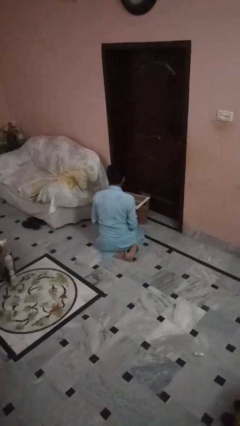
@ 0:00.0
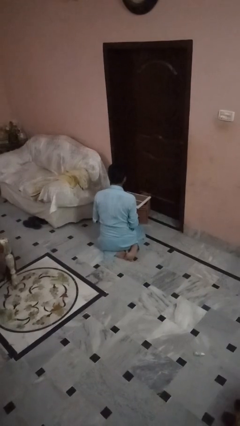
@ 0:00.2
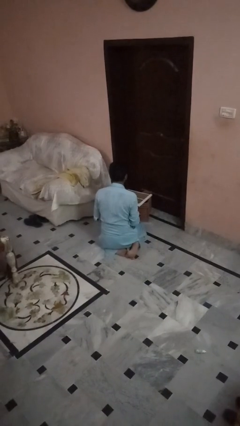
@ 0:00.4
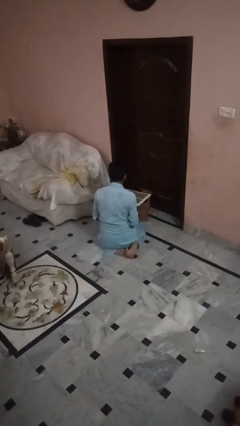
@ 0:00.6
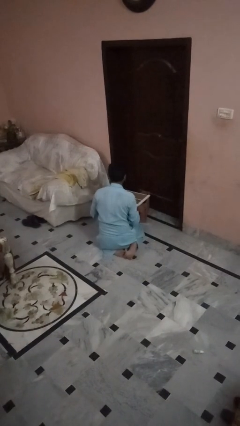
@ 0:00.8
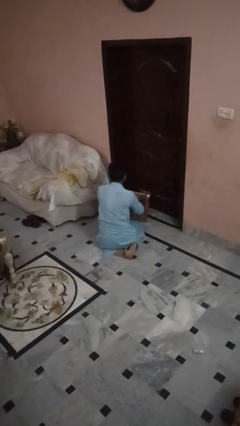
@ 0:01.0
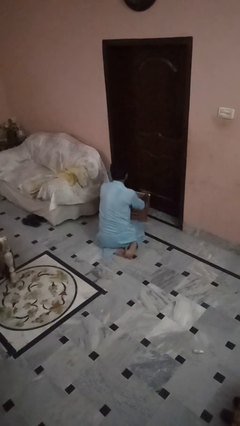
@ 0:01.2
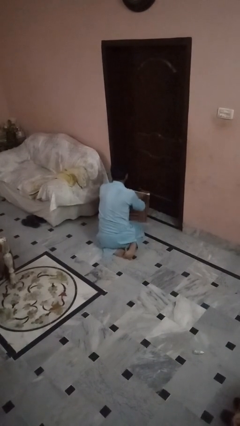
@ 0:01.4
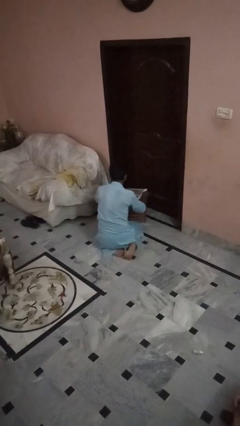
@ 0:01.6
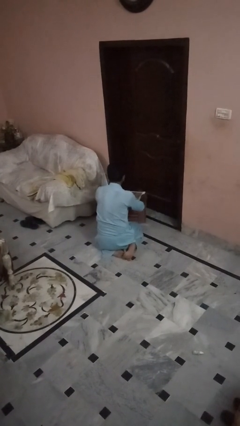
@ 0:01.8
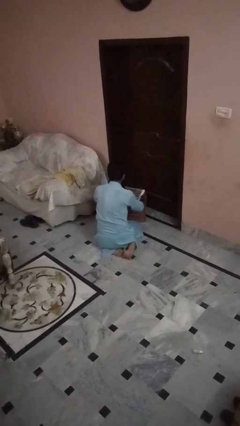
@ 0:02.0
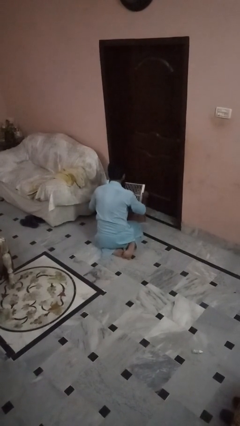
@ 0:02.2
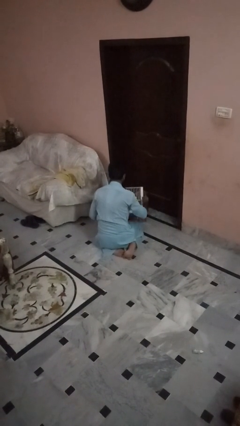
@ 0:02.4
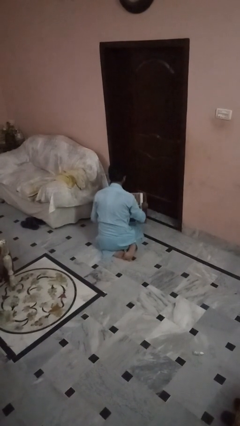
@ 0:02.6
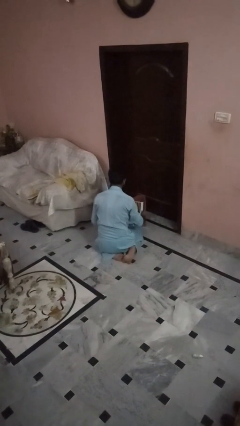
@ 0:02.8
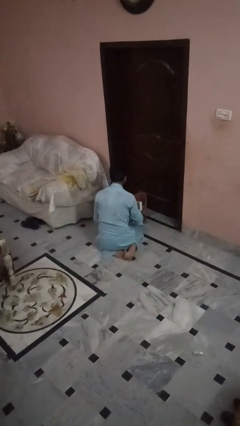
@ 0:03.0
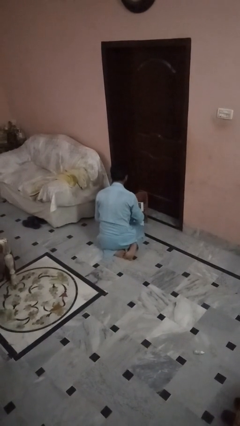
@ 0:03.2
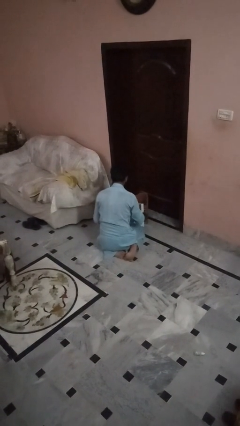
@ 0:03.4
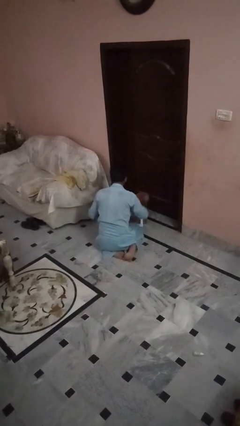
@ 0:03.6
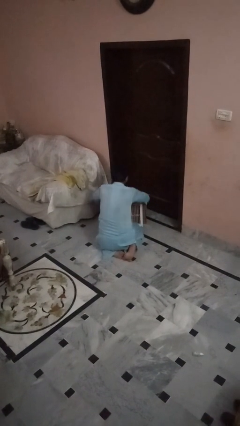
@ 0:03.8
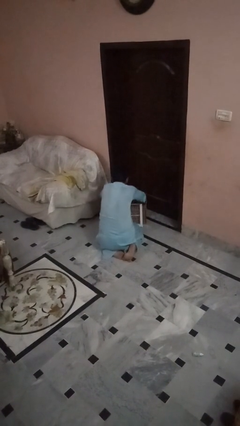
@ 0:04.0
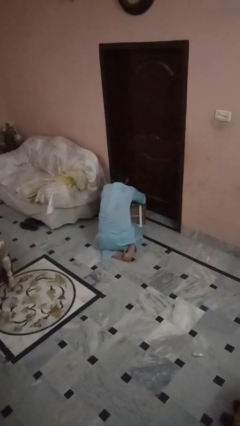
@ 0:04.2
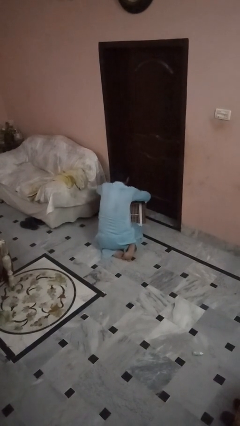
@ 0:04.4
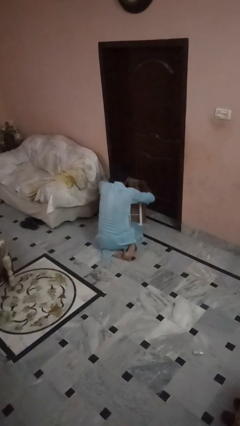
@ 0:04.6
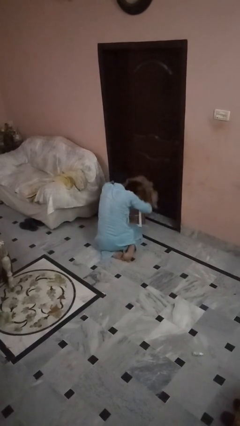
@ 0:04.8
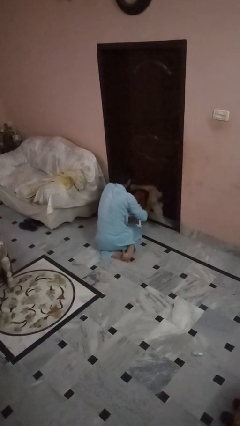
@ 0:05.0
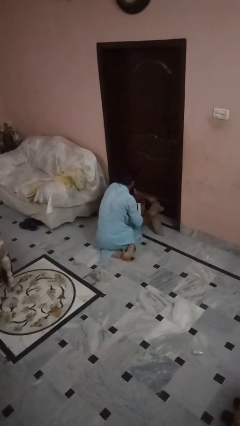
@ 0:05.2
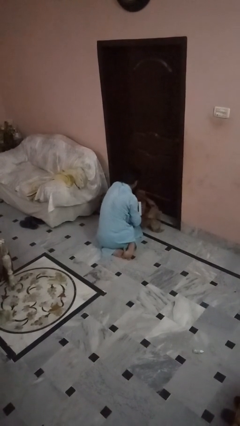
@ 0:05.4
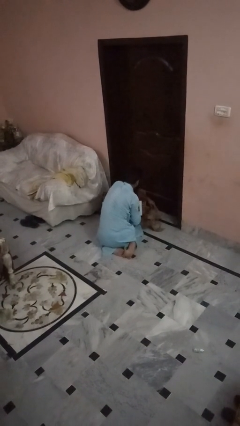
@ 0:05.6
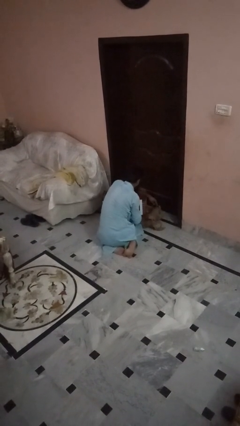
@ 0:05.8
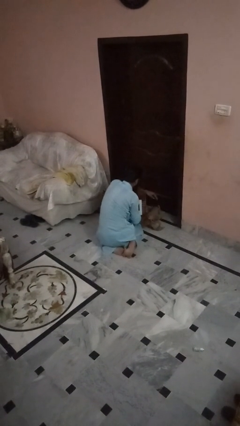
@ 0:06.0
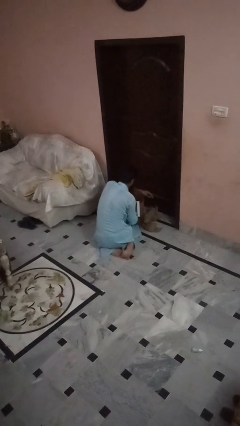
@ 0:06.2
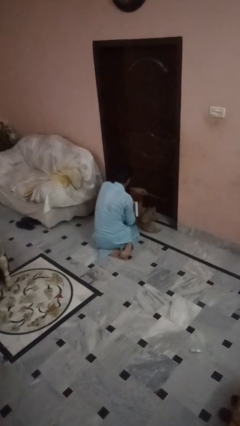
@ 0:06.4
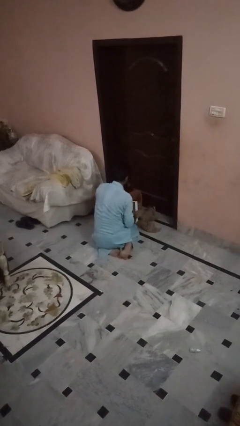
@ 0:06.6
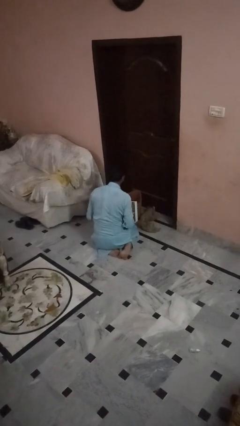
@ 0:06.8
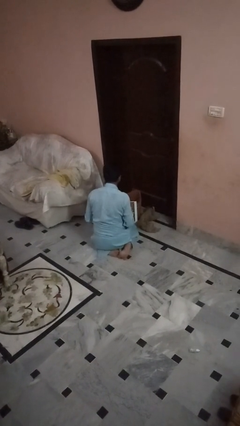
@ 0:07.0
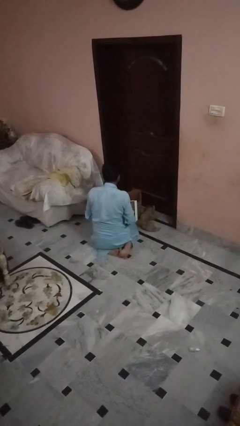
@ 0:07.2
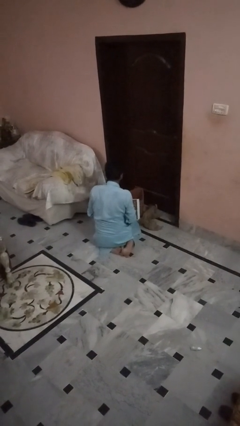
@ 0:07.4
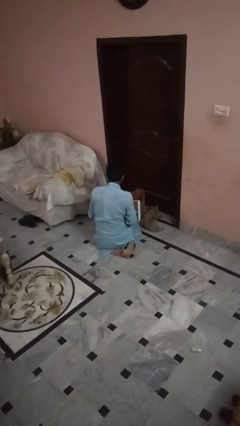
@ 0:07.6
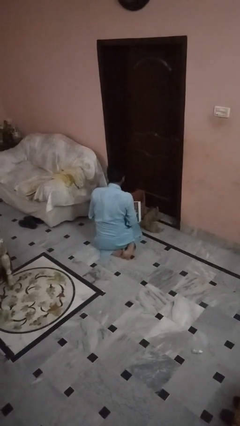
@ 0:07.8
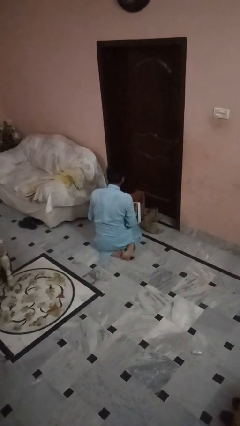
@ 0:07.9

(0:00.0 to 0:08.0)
person uncrates dog

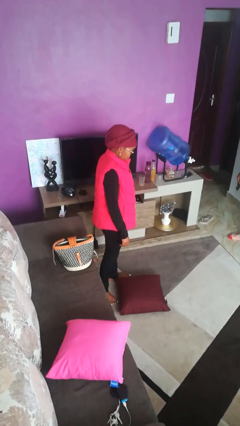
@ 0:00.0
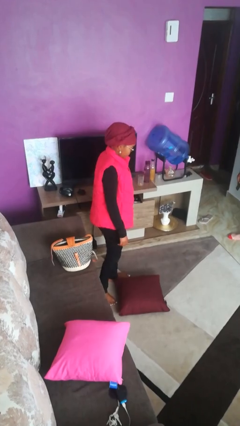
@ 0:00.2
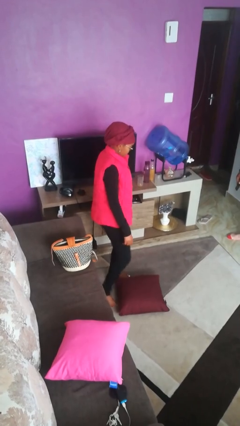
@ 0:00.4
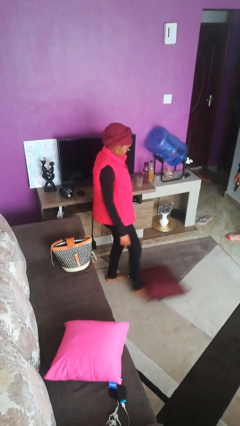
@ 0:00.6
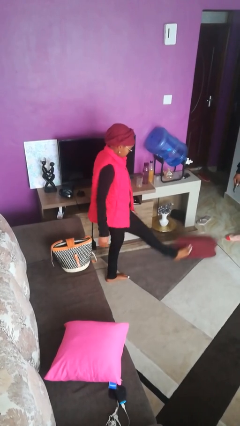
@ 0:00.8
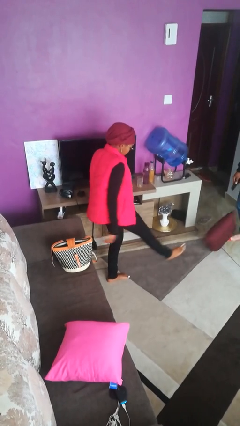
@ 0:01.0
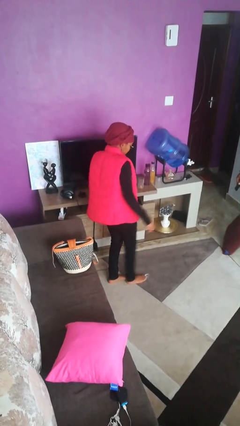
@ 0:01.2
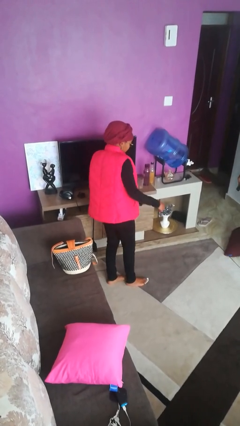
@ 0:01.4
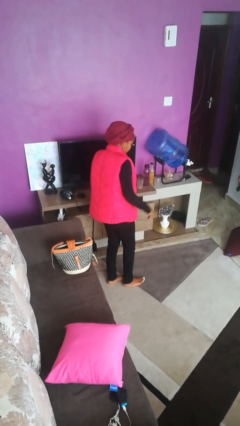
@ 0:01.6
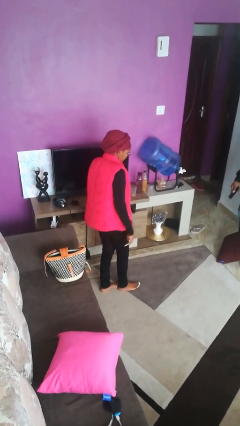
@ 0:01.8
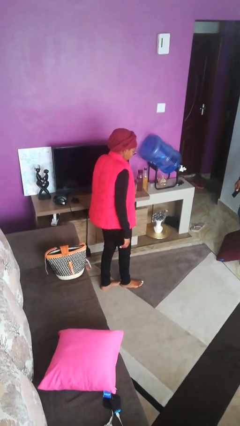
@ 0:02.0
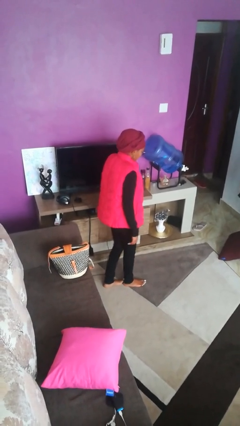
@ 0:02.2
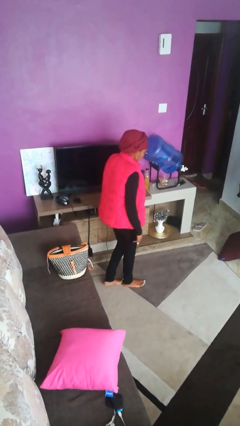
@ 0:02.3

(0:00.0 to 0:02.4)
person kicks object to person

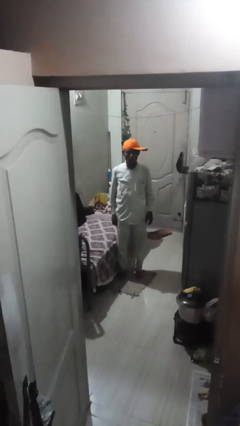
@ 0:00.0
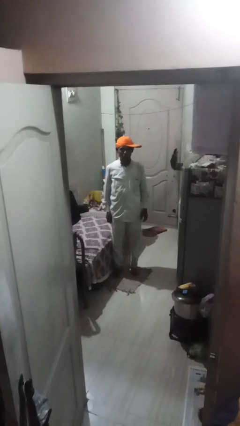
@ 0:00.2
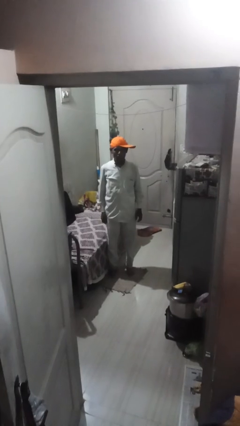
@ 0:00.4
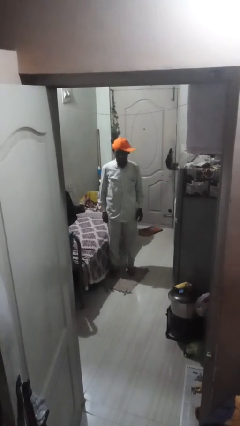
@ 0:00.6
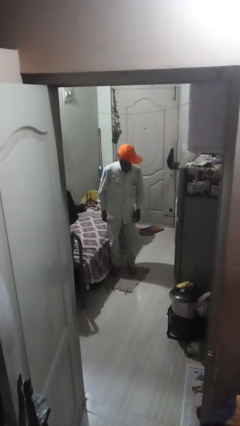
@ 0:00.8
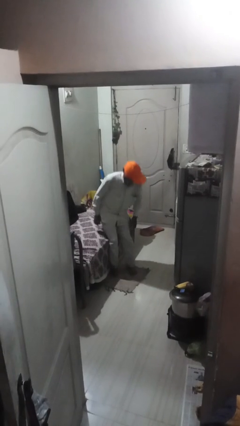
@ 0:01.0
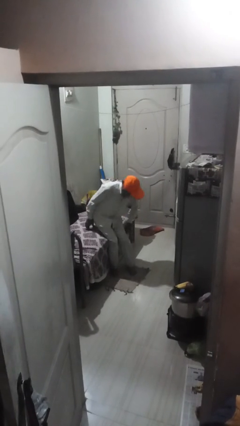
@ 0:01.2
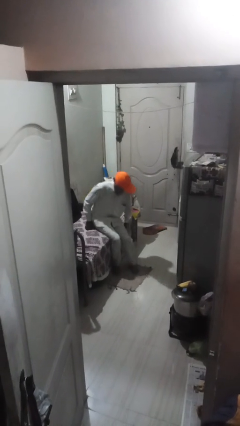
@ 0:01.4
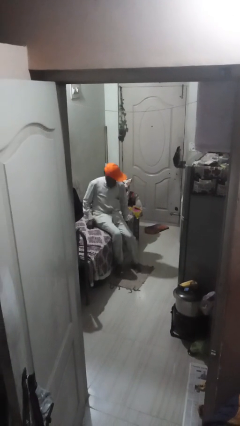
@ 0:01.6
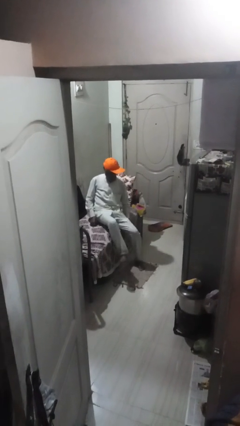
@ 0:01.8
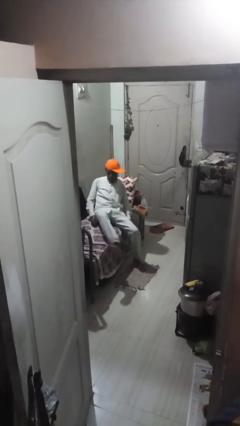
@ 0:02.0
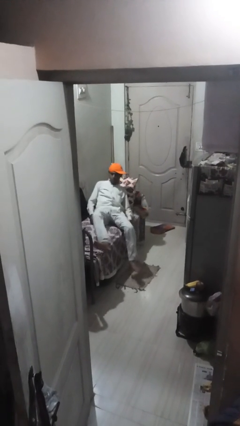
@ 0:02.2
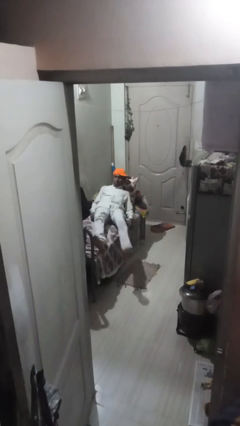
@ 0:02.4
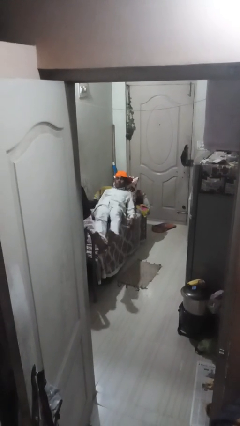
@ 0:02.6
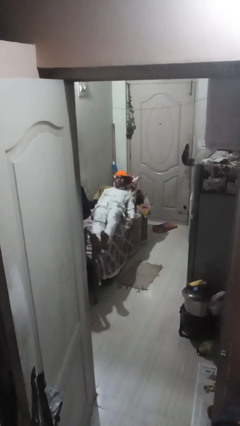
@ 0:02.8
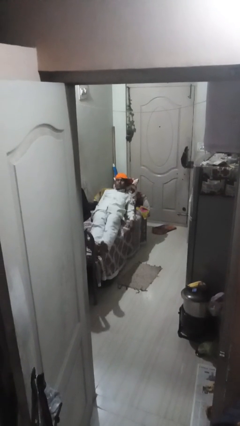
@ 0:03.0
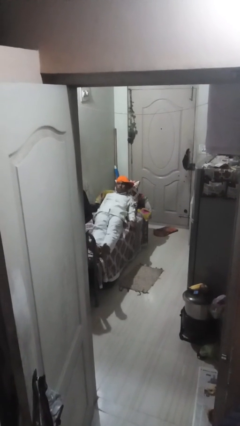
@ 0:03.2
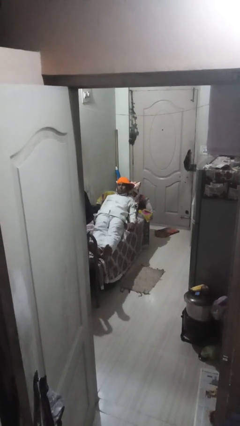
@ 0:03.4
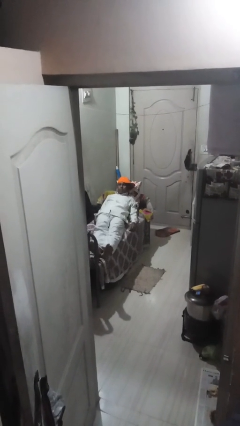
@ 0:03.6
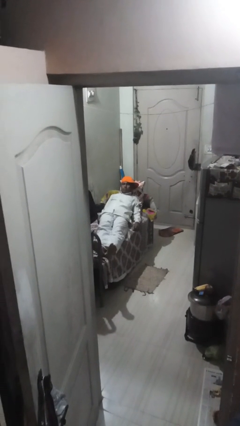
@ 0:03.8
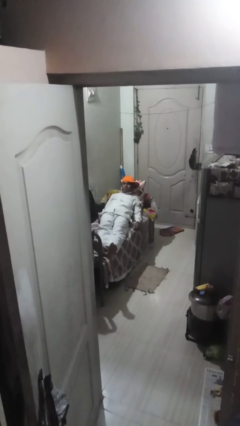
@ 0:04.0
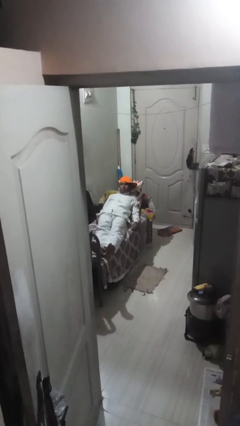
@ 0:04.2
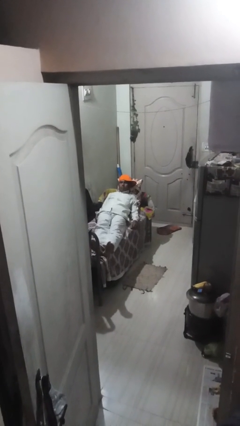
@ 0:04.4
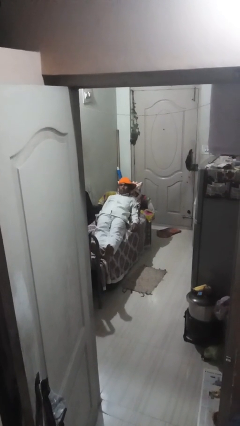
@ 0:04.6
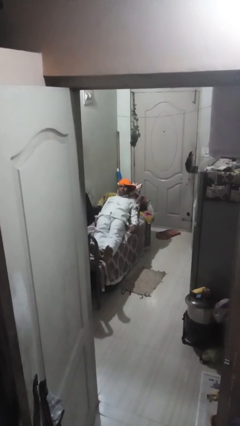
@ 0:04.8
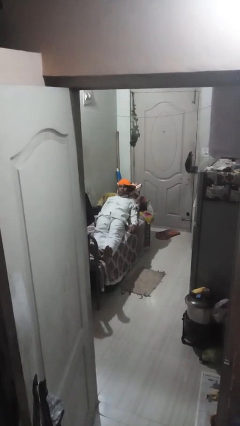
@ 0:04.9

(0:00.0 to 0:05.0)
person lies down on bed

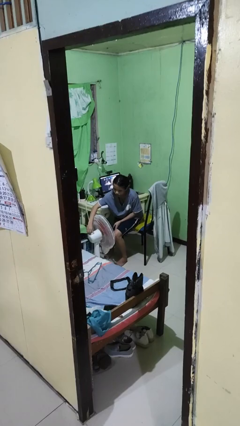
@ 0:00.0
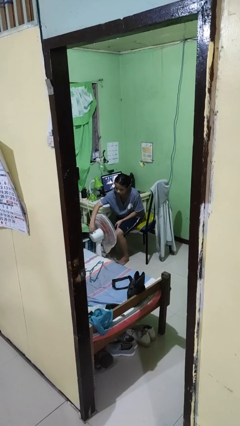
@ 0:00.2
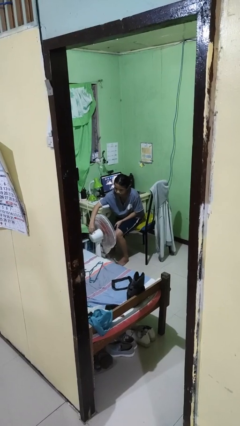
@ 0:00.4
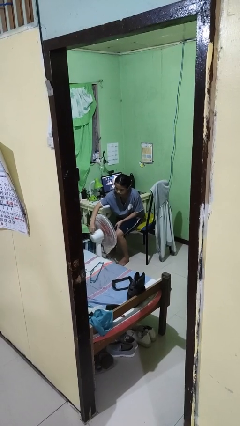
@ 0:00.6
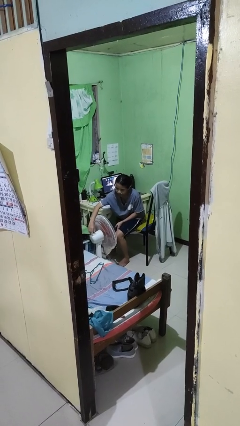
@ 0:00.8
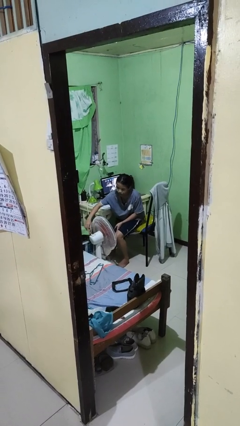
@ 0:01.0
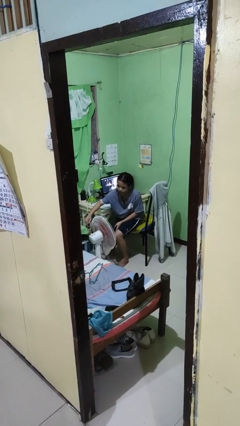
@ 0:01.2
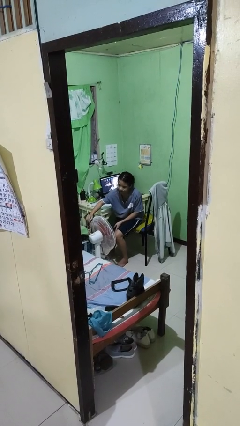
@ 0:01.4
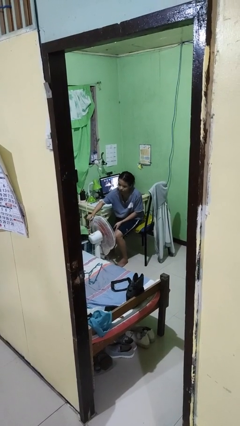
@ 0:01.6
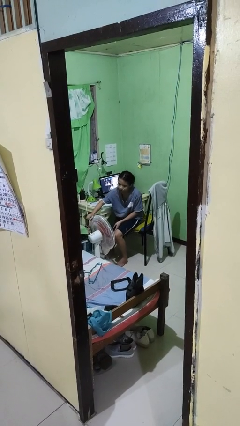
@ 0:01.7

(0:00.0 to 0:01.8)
person turns off fan

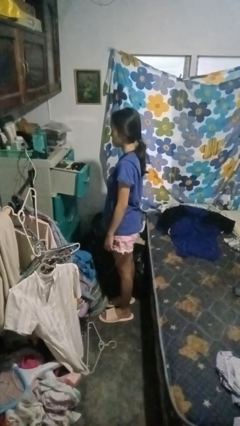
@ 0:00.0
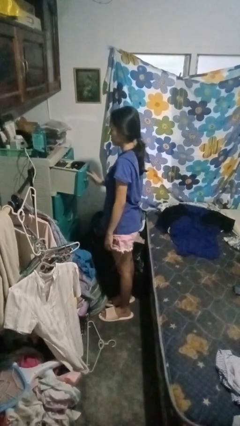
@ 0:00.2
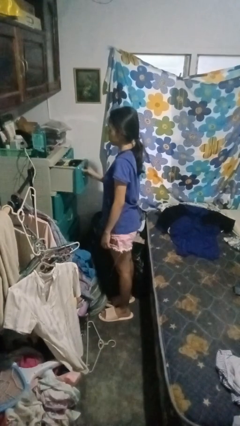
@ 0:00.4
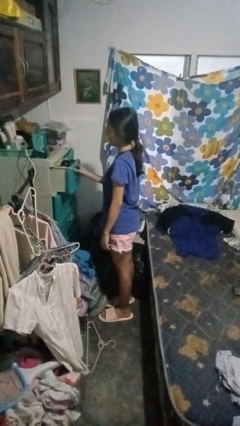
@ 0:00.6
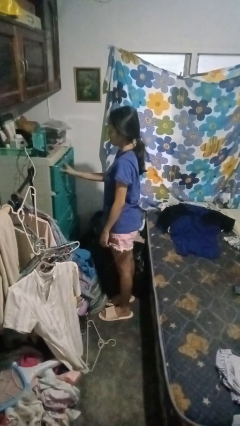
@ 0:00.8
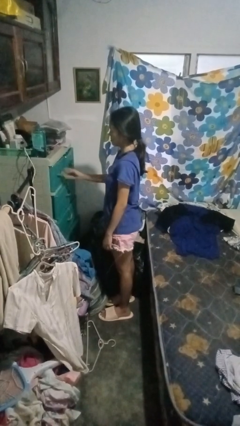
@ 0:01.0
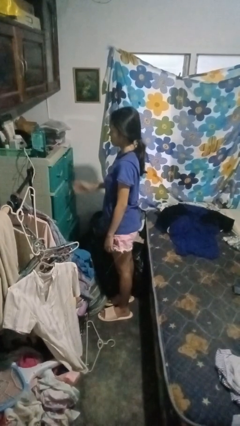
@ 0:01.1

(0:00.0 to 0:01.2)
person closes dresser drawer
